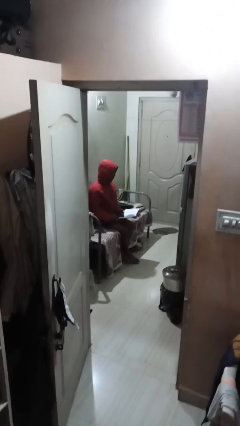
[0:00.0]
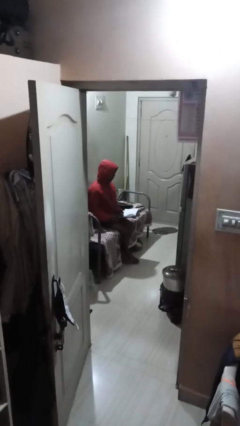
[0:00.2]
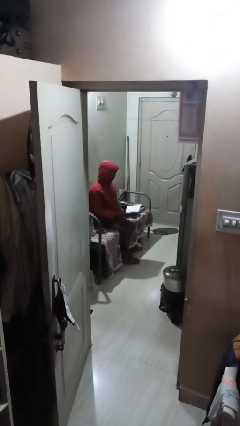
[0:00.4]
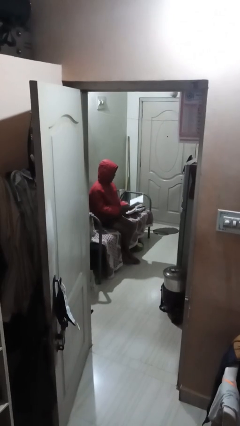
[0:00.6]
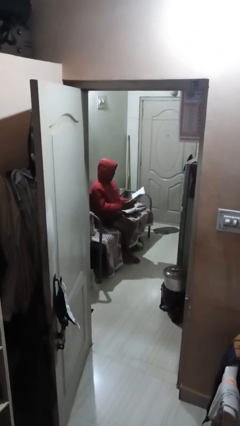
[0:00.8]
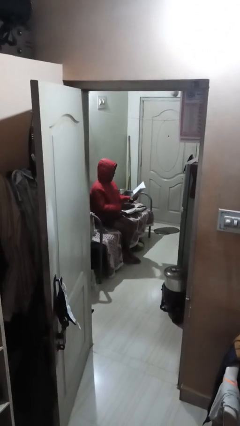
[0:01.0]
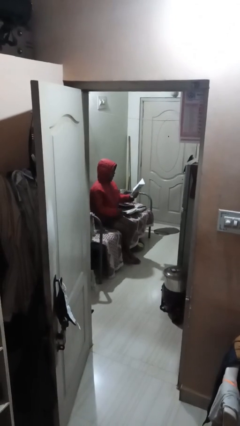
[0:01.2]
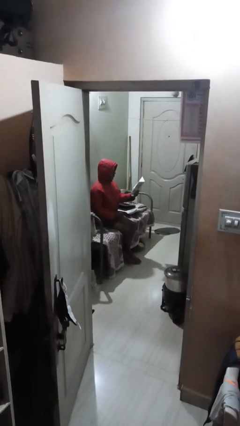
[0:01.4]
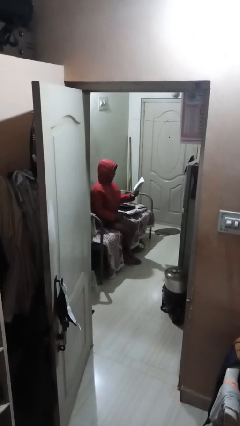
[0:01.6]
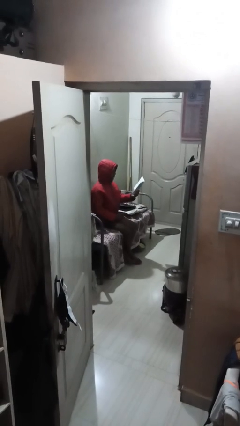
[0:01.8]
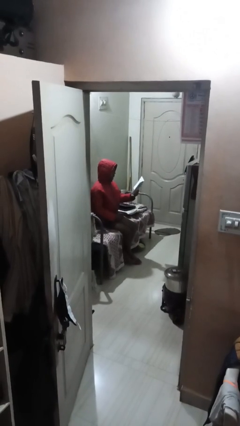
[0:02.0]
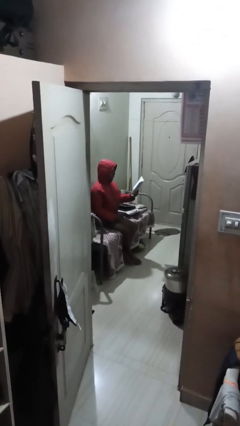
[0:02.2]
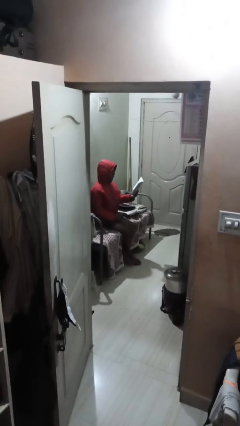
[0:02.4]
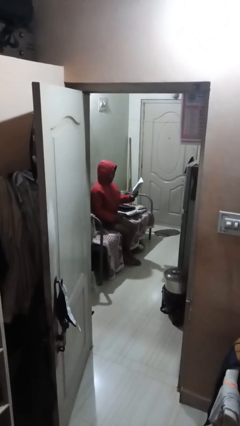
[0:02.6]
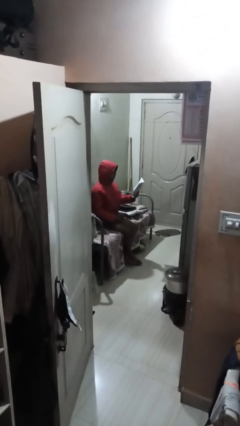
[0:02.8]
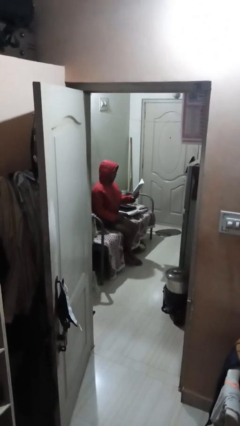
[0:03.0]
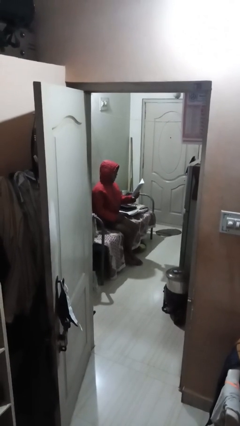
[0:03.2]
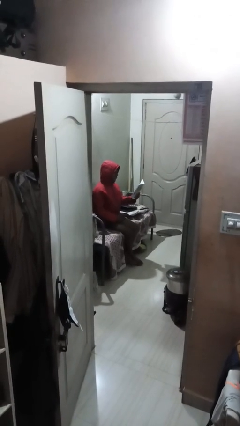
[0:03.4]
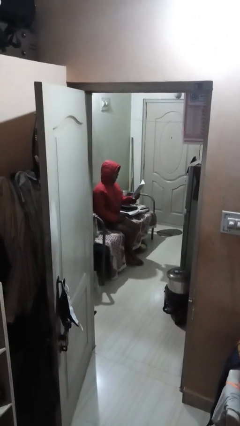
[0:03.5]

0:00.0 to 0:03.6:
person reads document

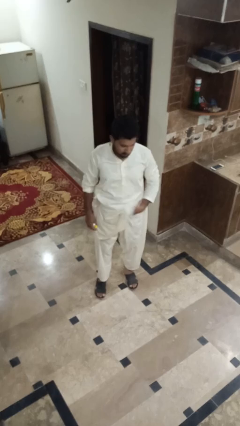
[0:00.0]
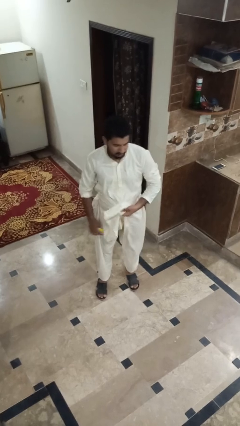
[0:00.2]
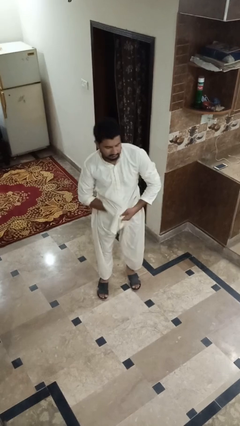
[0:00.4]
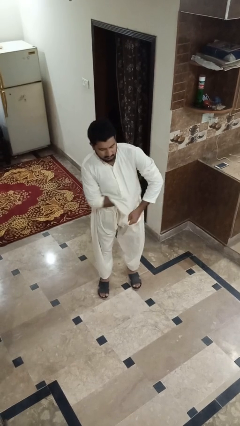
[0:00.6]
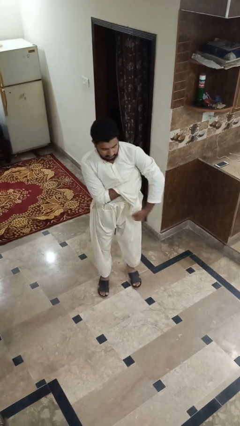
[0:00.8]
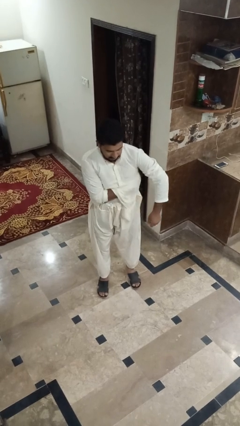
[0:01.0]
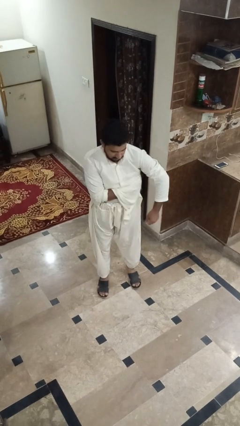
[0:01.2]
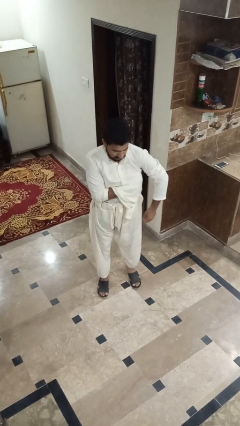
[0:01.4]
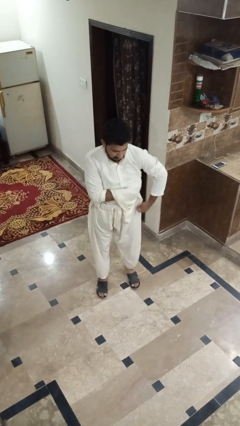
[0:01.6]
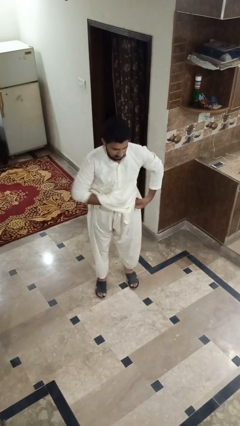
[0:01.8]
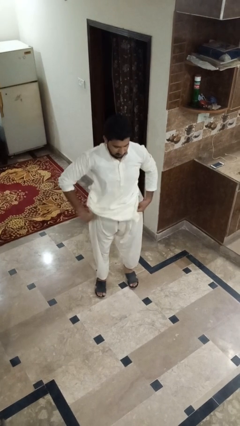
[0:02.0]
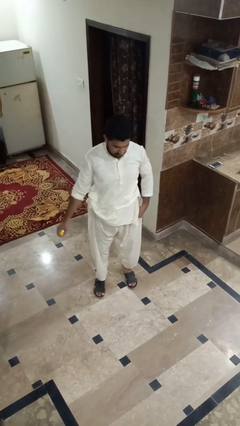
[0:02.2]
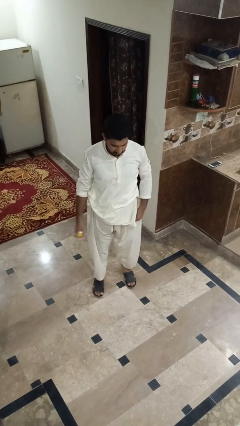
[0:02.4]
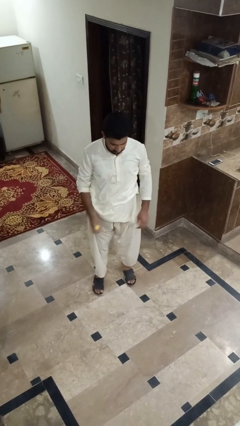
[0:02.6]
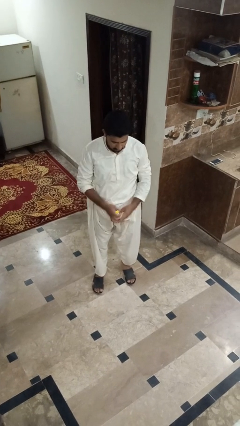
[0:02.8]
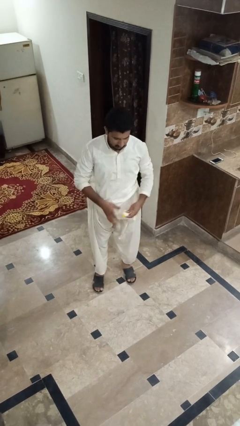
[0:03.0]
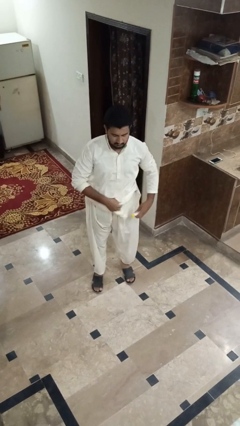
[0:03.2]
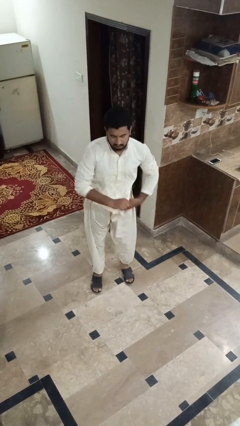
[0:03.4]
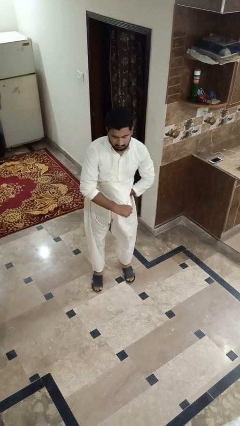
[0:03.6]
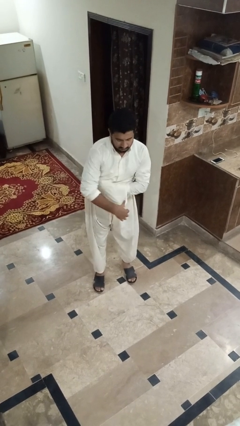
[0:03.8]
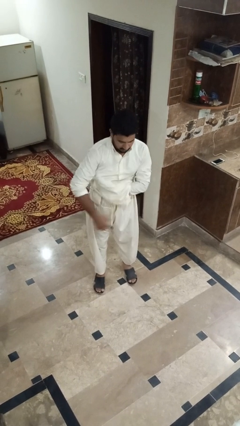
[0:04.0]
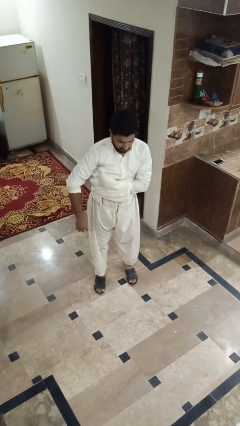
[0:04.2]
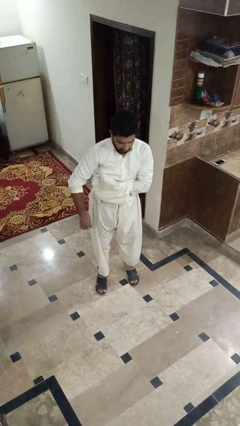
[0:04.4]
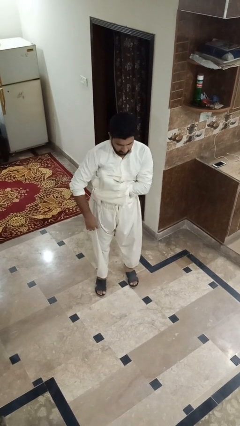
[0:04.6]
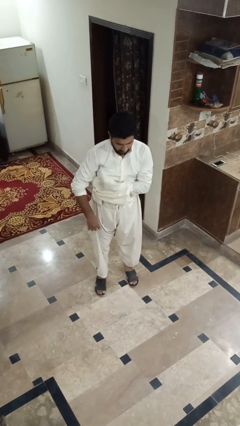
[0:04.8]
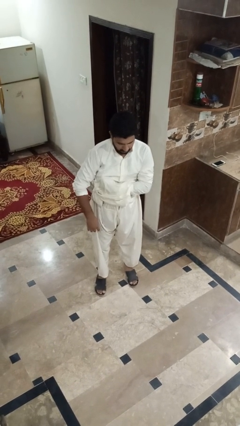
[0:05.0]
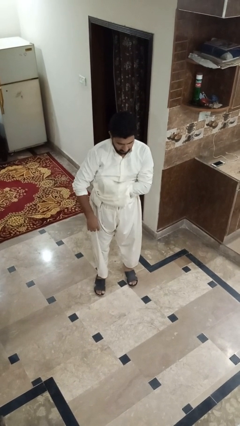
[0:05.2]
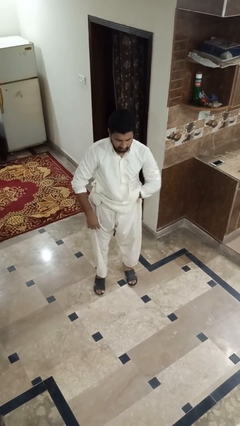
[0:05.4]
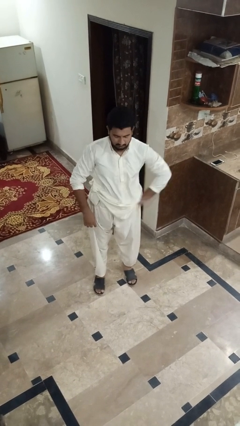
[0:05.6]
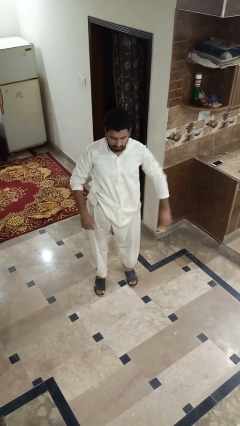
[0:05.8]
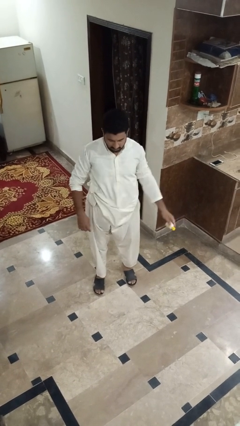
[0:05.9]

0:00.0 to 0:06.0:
person applies deodorant

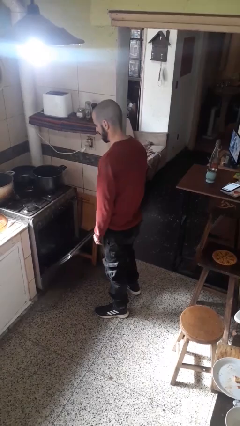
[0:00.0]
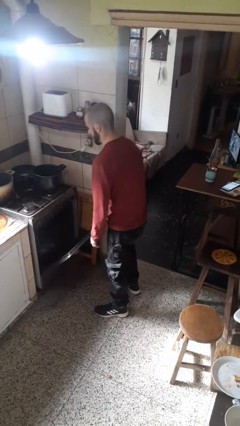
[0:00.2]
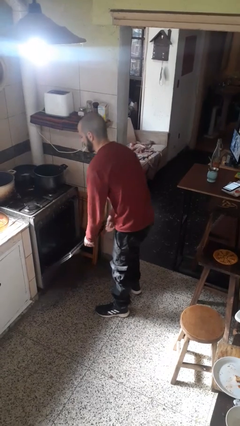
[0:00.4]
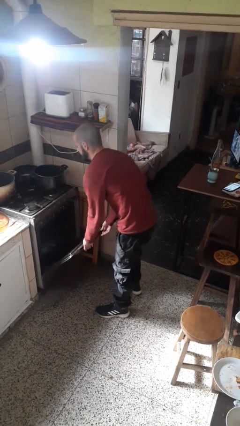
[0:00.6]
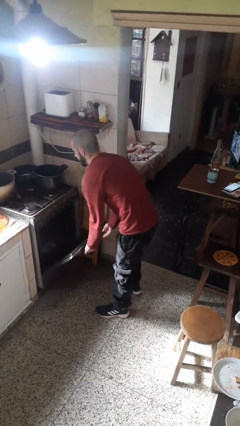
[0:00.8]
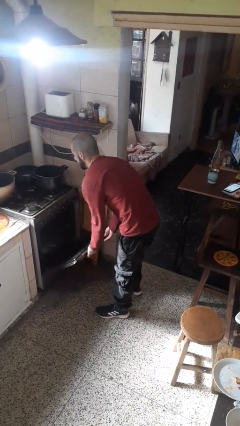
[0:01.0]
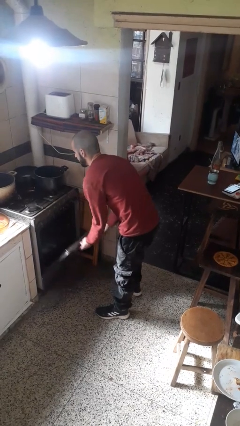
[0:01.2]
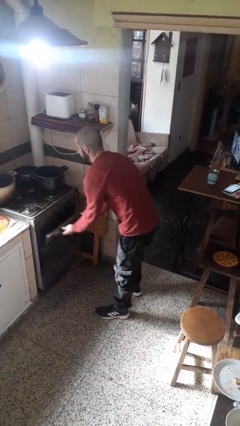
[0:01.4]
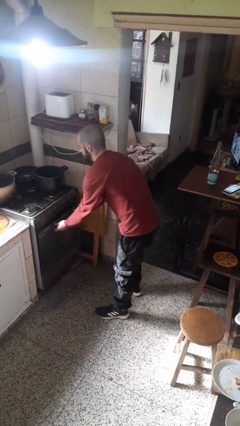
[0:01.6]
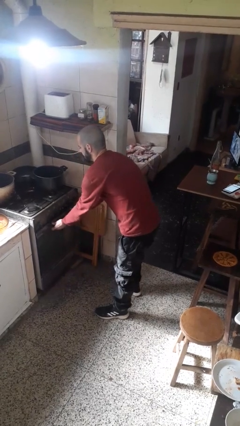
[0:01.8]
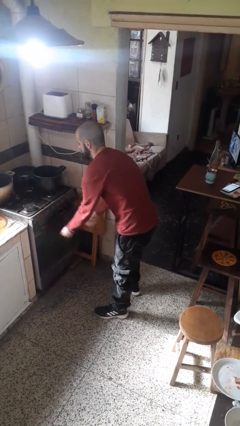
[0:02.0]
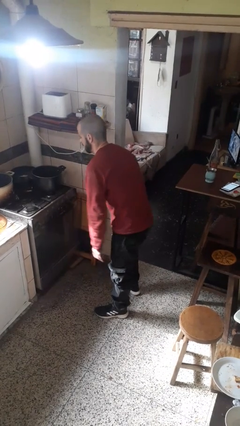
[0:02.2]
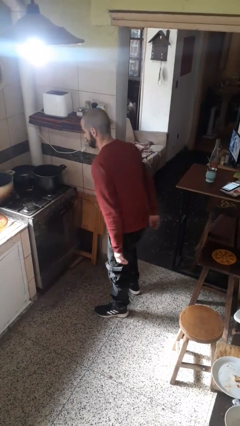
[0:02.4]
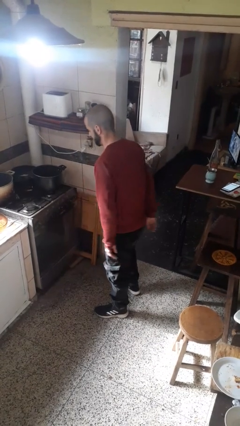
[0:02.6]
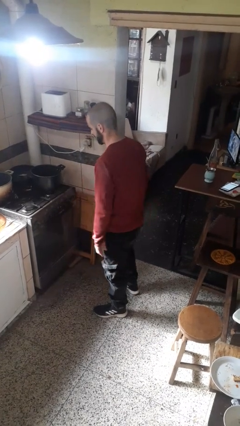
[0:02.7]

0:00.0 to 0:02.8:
person closes oven door

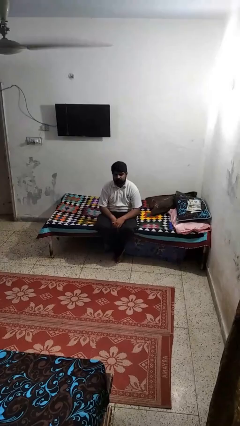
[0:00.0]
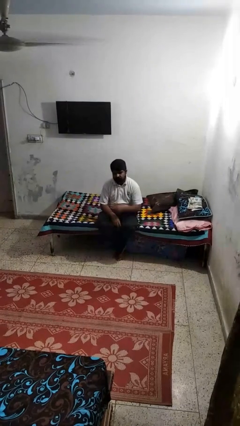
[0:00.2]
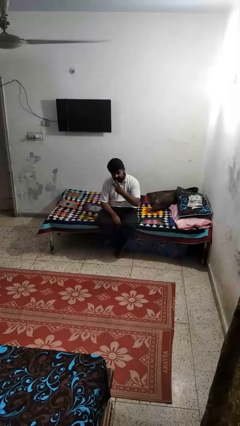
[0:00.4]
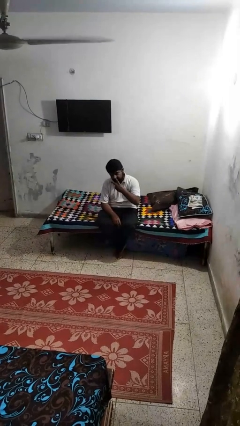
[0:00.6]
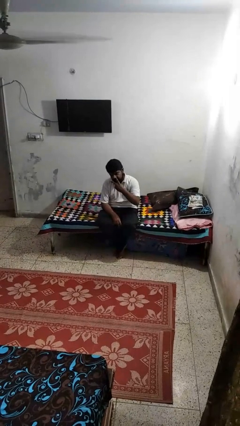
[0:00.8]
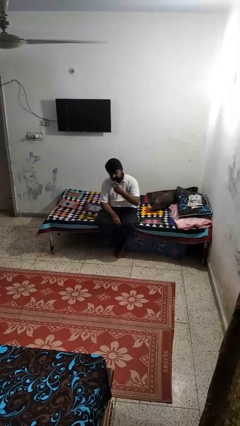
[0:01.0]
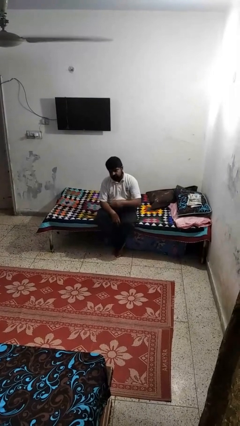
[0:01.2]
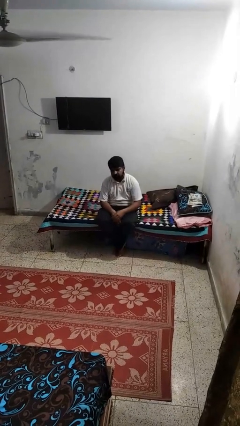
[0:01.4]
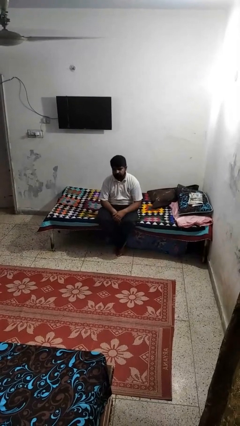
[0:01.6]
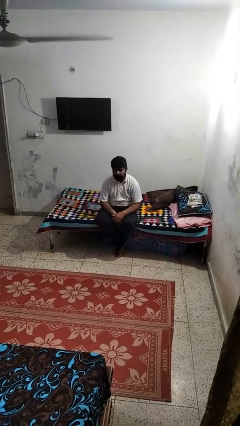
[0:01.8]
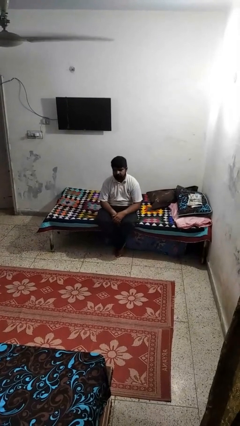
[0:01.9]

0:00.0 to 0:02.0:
person gestures peace

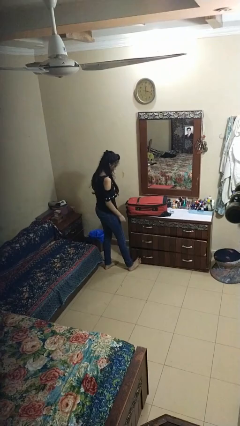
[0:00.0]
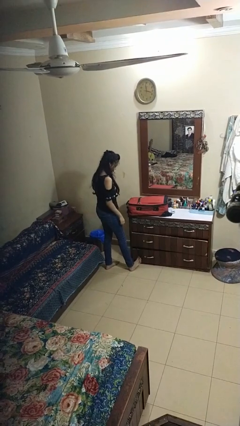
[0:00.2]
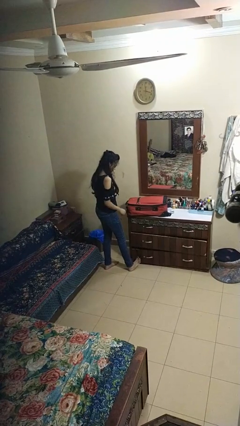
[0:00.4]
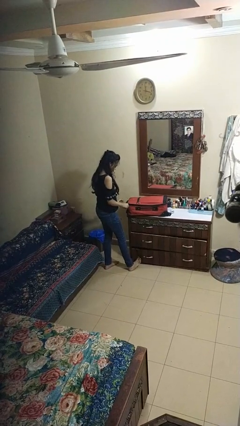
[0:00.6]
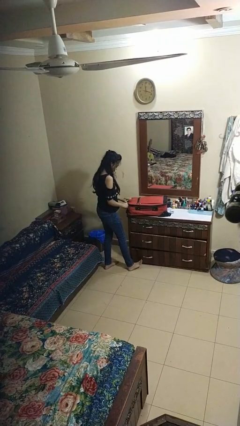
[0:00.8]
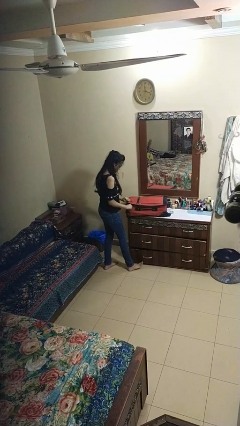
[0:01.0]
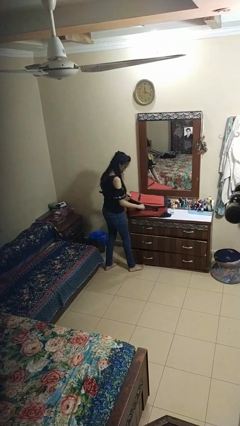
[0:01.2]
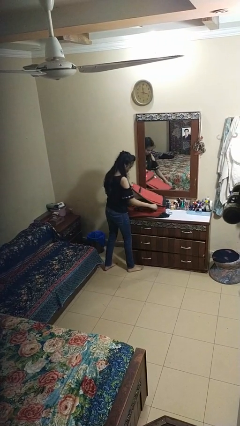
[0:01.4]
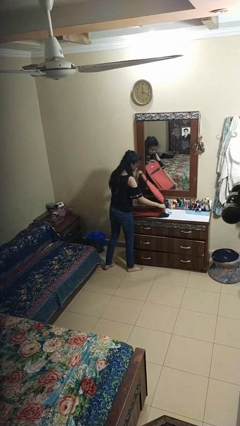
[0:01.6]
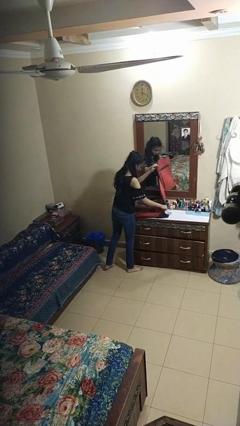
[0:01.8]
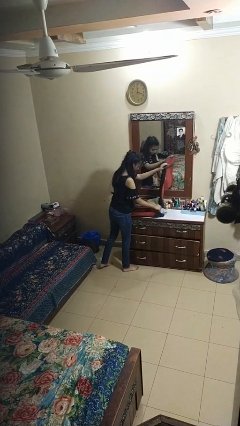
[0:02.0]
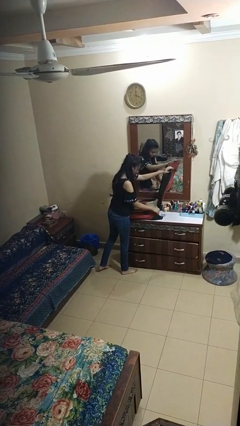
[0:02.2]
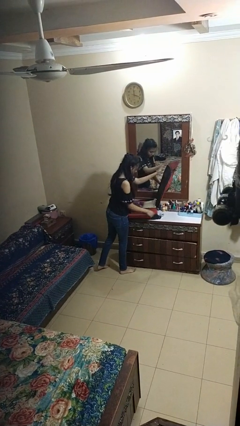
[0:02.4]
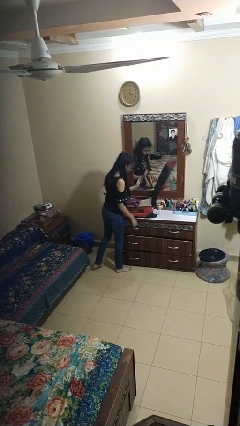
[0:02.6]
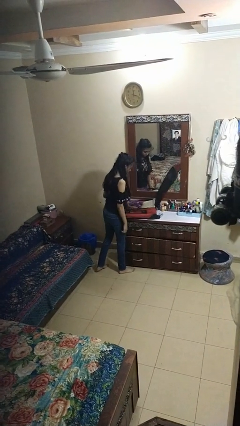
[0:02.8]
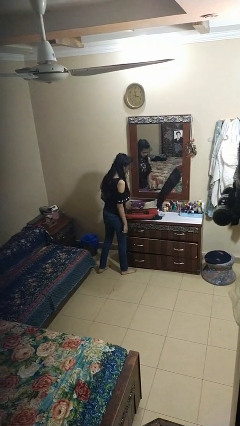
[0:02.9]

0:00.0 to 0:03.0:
person opens suitcase

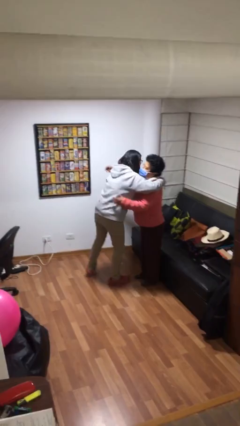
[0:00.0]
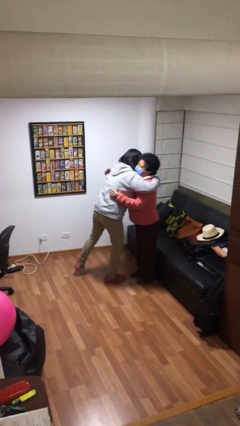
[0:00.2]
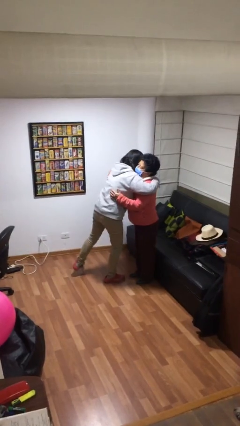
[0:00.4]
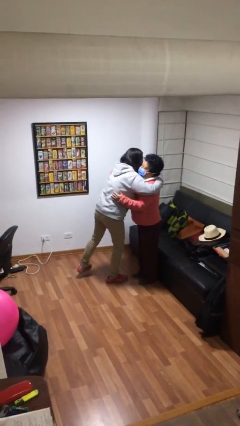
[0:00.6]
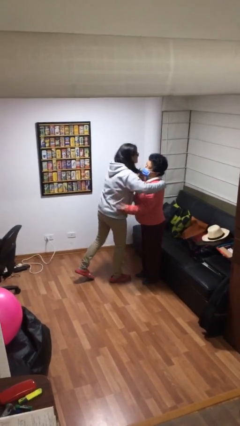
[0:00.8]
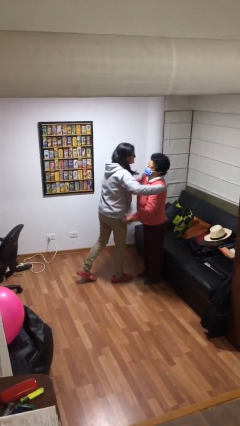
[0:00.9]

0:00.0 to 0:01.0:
person embraces person
